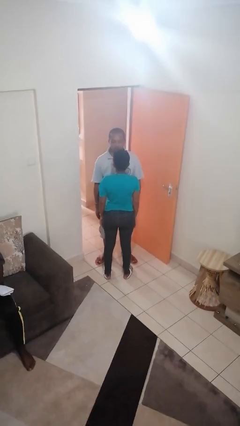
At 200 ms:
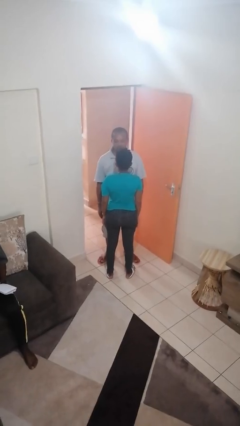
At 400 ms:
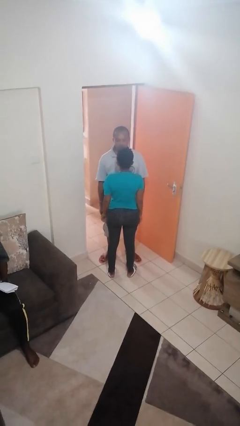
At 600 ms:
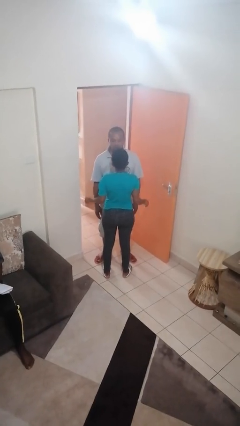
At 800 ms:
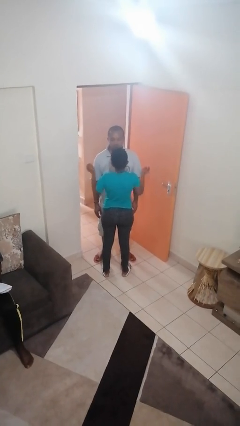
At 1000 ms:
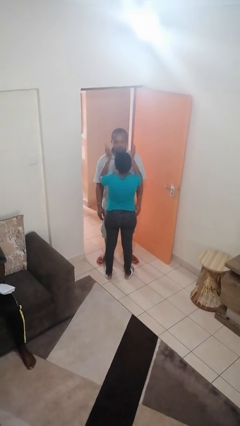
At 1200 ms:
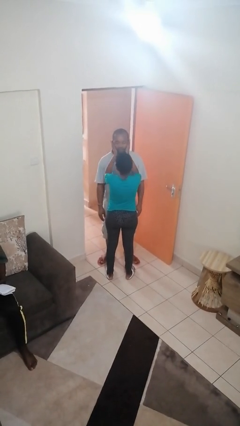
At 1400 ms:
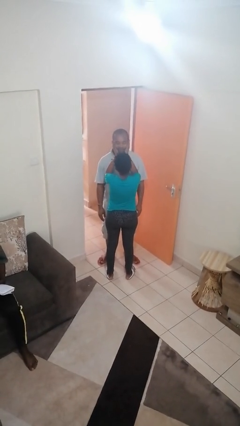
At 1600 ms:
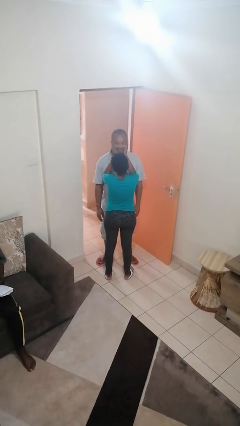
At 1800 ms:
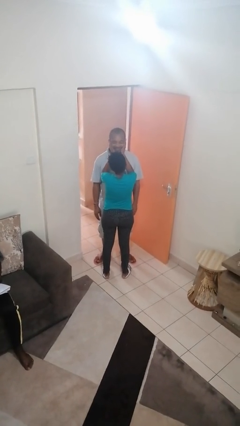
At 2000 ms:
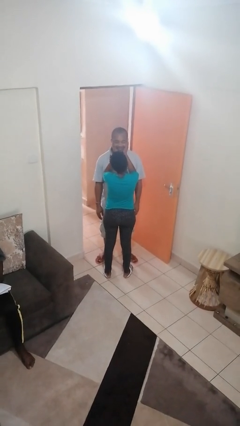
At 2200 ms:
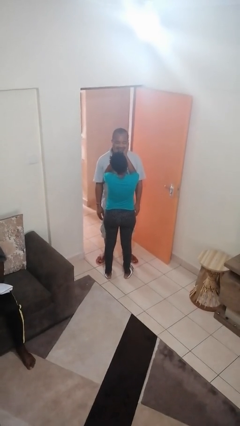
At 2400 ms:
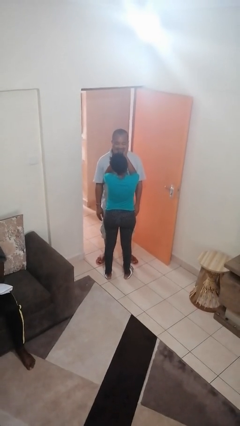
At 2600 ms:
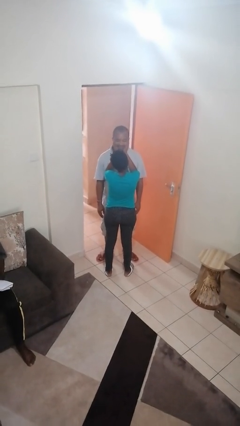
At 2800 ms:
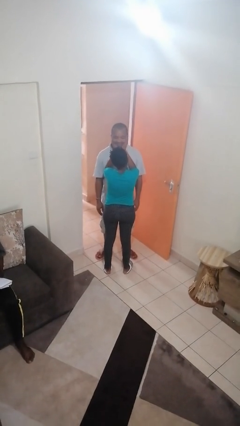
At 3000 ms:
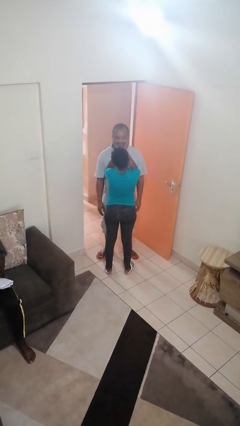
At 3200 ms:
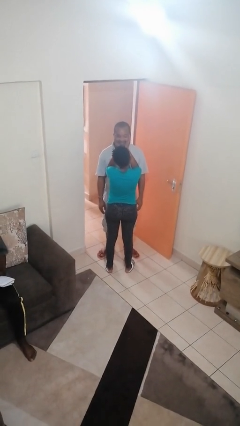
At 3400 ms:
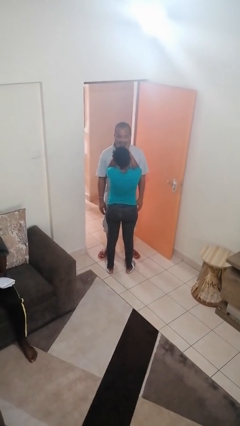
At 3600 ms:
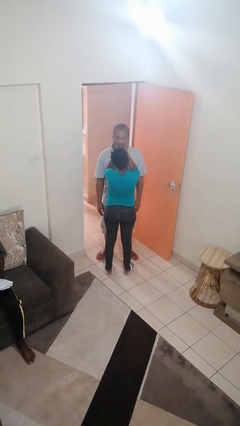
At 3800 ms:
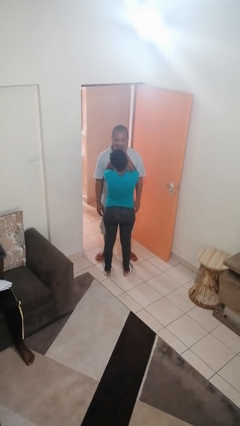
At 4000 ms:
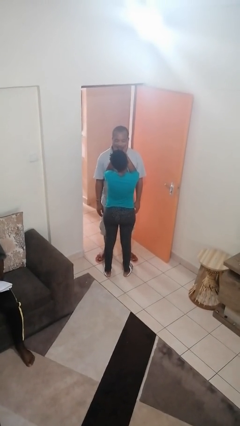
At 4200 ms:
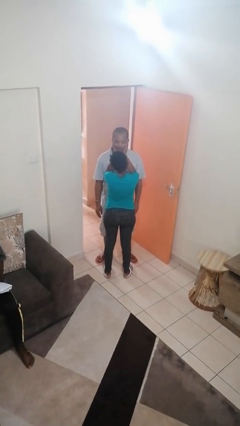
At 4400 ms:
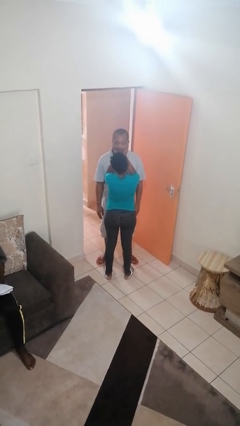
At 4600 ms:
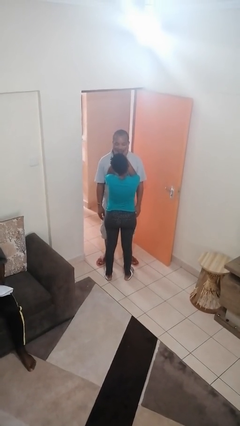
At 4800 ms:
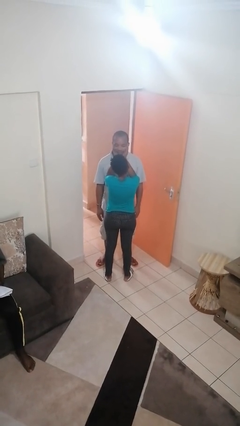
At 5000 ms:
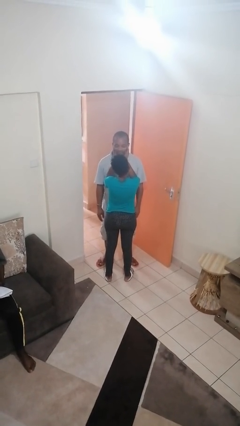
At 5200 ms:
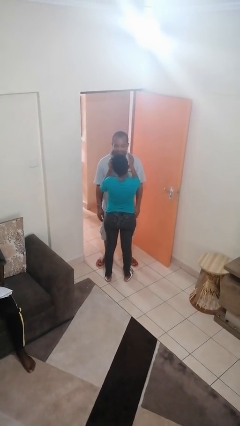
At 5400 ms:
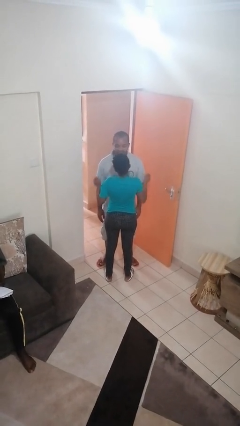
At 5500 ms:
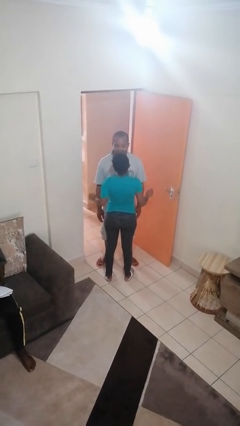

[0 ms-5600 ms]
person touches face of person

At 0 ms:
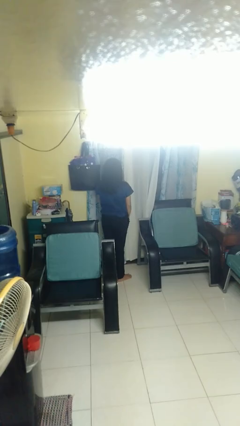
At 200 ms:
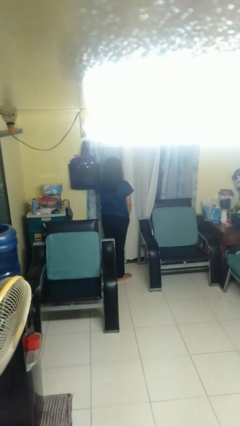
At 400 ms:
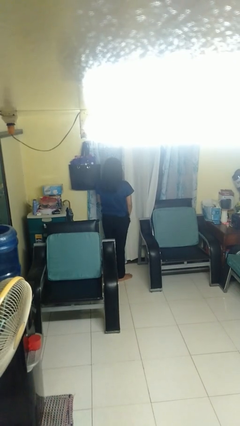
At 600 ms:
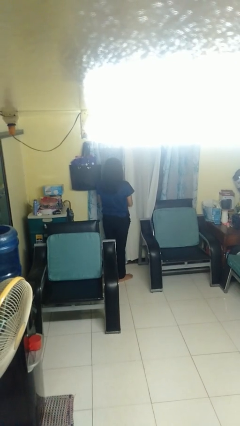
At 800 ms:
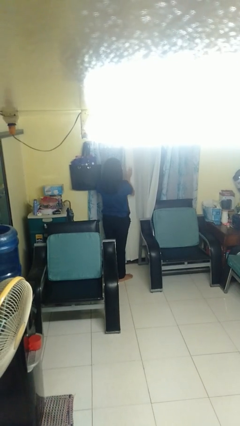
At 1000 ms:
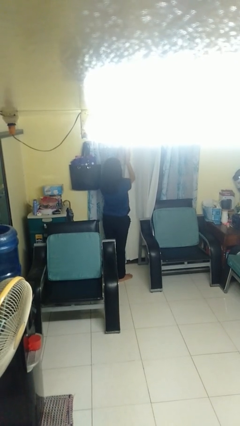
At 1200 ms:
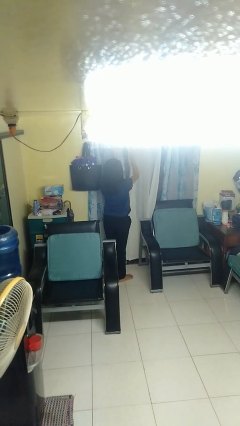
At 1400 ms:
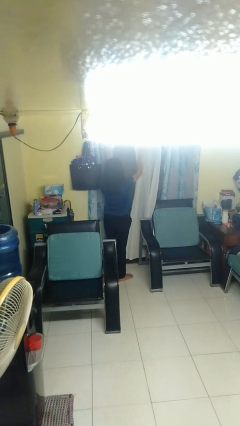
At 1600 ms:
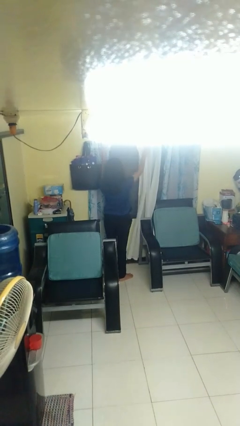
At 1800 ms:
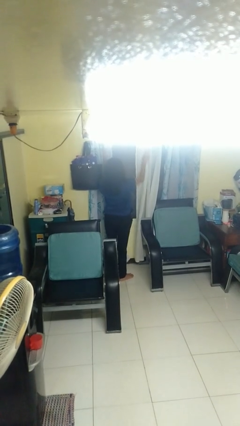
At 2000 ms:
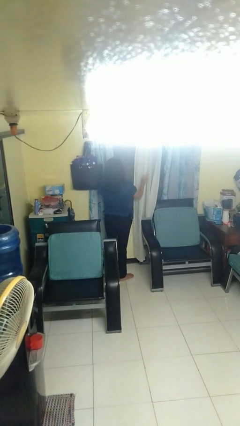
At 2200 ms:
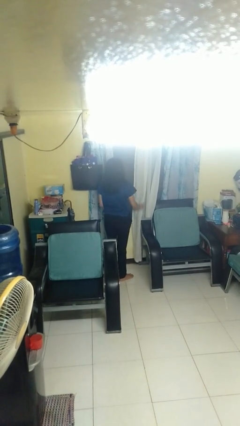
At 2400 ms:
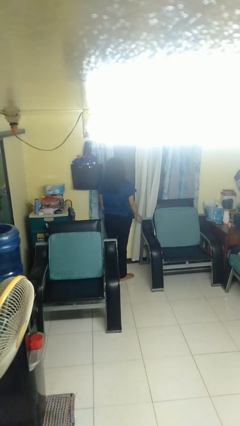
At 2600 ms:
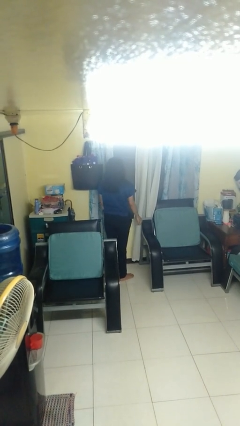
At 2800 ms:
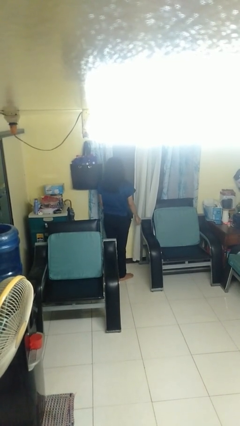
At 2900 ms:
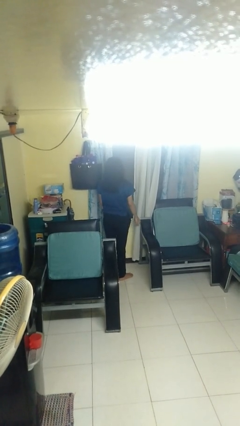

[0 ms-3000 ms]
person opens curtains

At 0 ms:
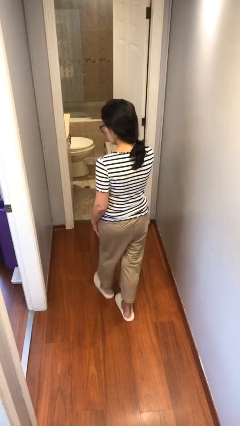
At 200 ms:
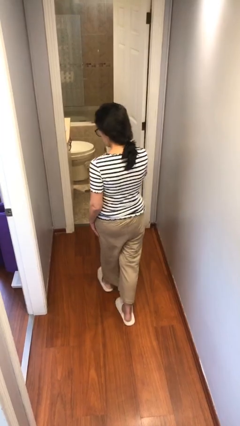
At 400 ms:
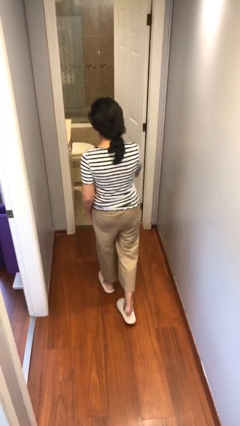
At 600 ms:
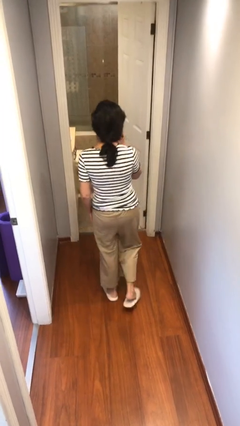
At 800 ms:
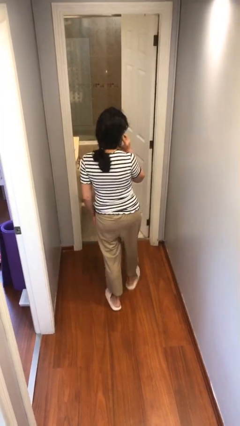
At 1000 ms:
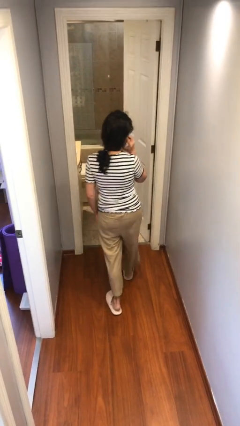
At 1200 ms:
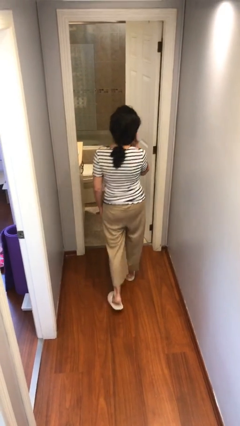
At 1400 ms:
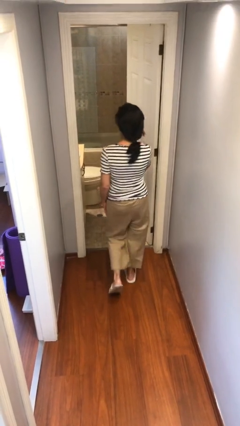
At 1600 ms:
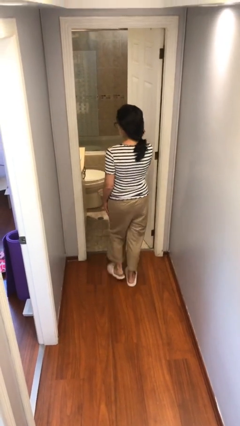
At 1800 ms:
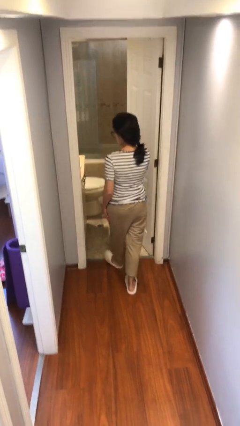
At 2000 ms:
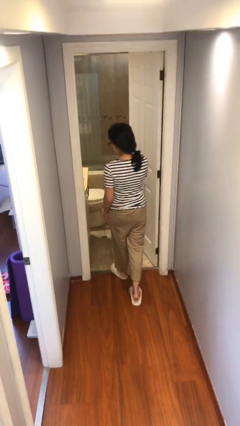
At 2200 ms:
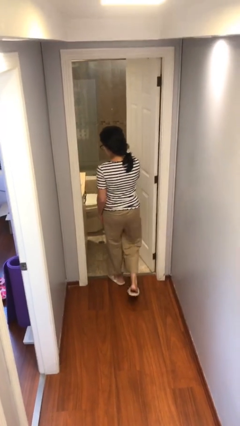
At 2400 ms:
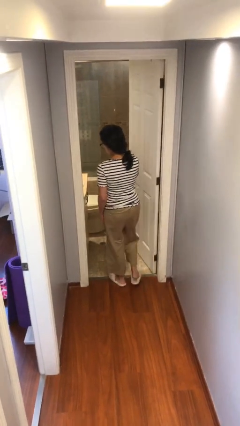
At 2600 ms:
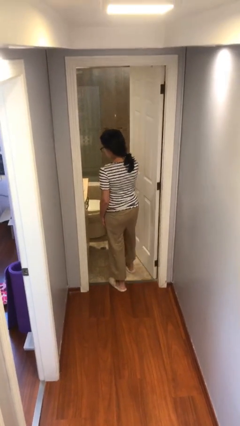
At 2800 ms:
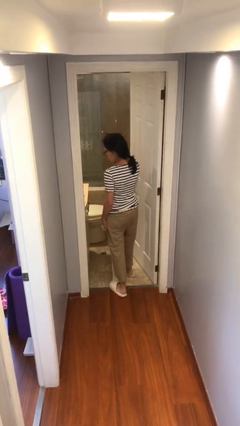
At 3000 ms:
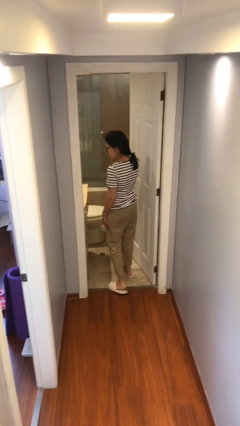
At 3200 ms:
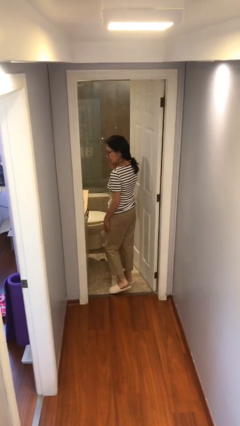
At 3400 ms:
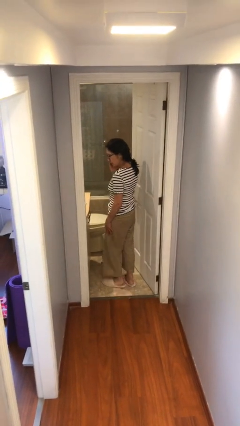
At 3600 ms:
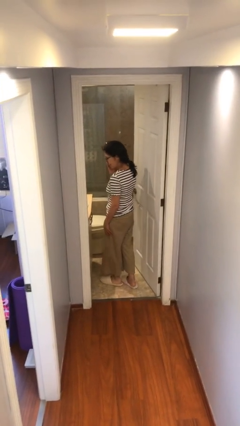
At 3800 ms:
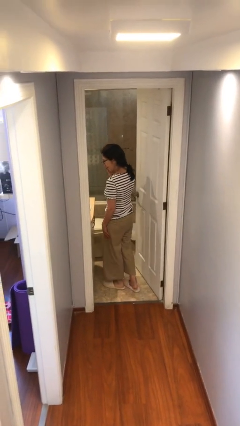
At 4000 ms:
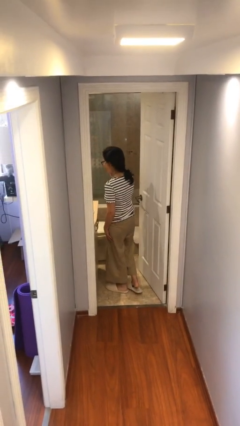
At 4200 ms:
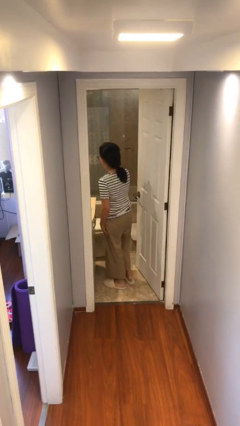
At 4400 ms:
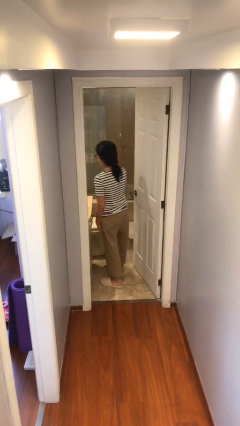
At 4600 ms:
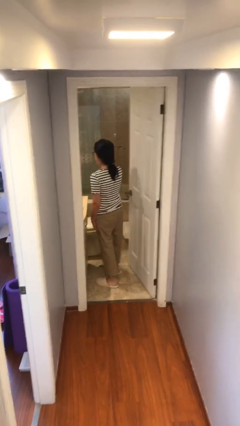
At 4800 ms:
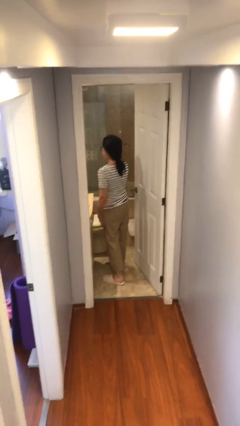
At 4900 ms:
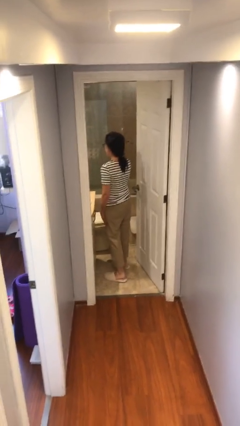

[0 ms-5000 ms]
person exits scene through structure

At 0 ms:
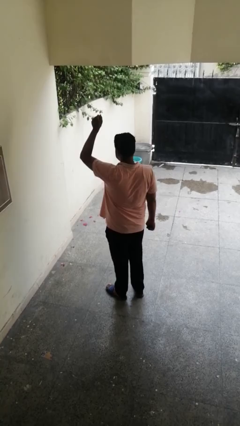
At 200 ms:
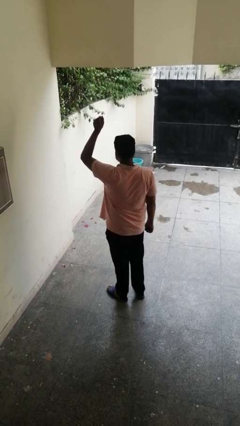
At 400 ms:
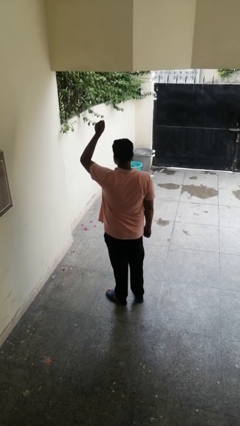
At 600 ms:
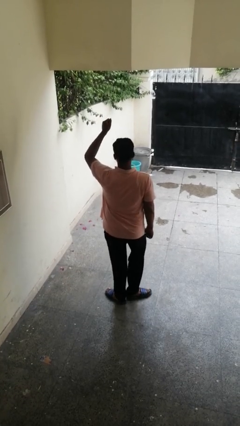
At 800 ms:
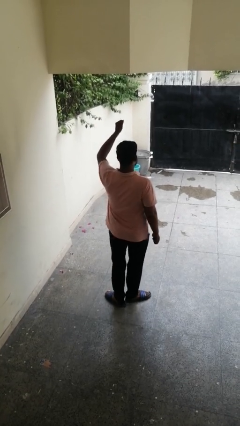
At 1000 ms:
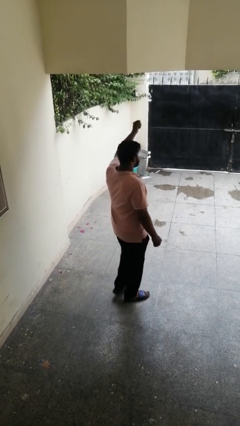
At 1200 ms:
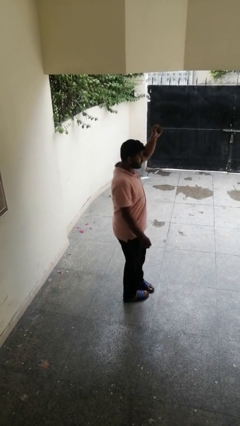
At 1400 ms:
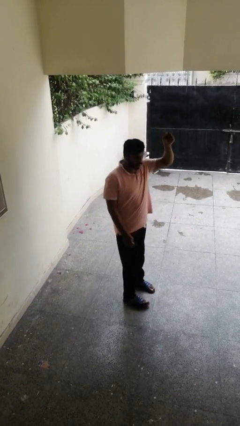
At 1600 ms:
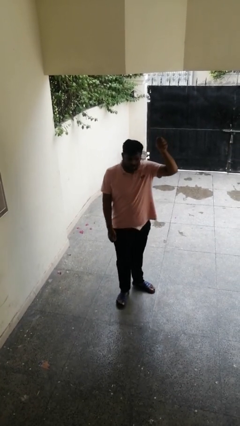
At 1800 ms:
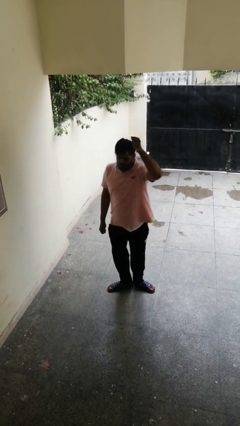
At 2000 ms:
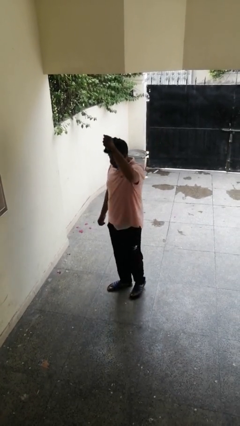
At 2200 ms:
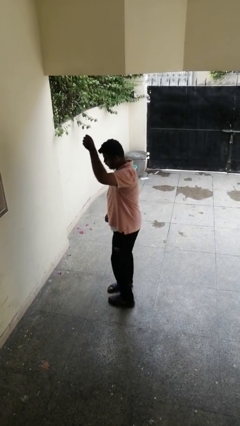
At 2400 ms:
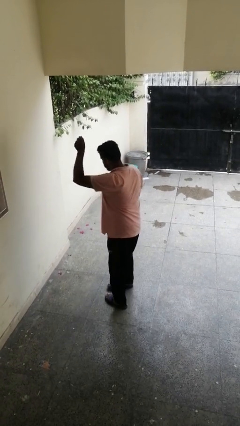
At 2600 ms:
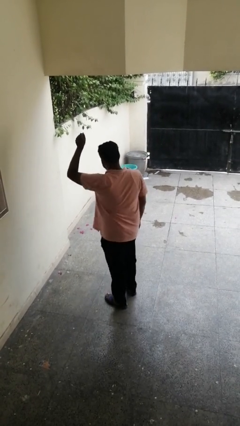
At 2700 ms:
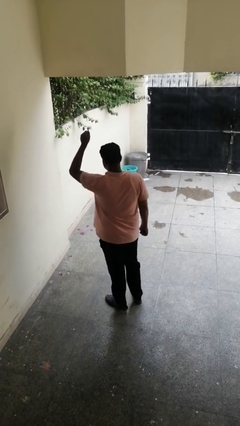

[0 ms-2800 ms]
person twirls

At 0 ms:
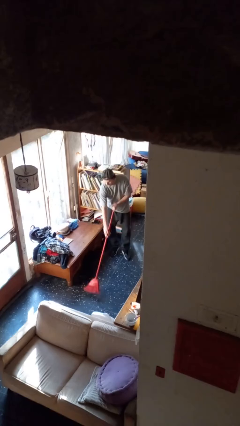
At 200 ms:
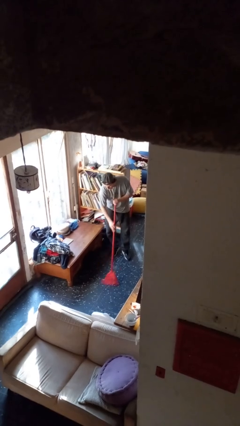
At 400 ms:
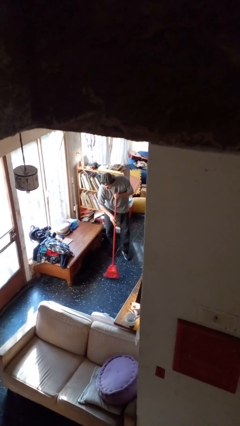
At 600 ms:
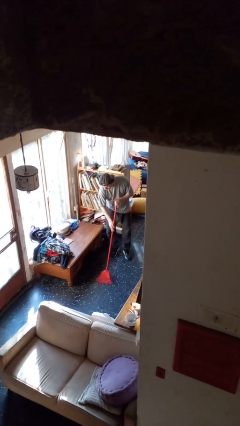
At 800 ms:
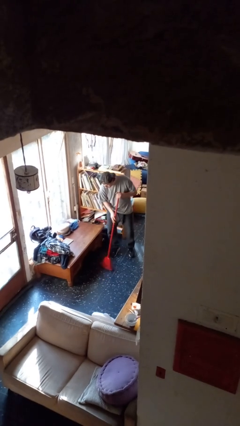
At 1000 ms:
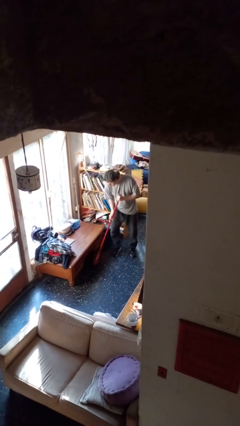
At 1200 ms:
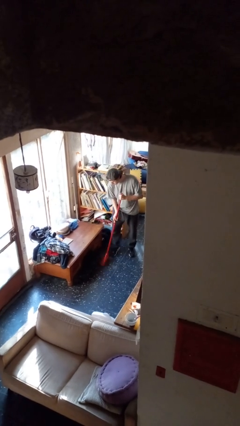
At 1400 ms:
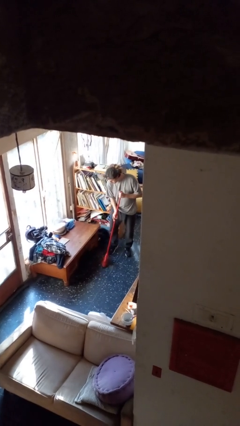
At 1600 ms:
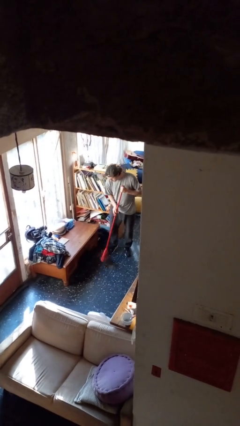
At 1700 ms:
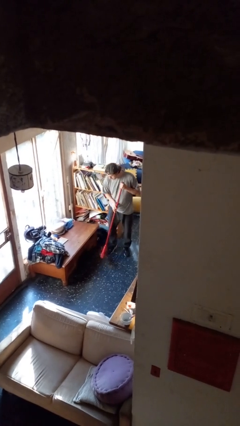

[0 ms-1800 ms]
person sweeps floor
